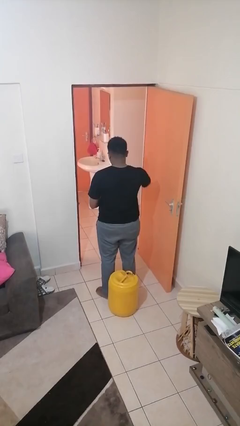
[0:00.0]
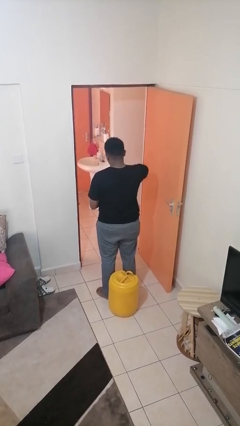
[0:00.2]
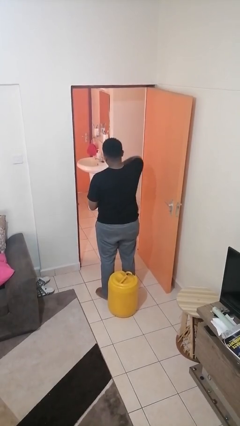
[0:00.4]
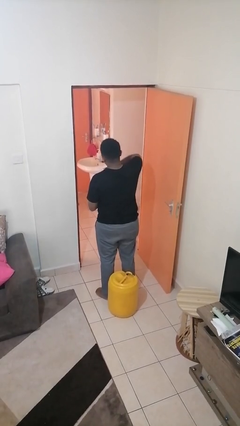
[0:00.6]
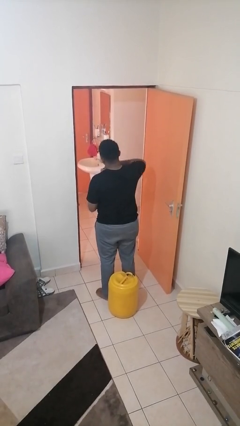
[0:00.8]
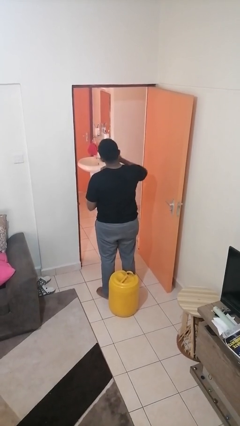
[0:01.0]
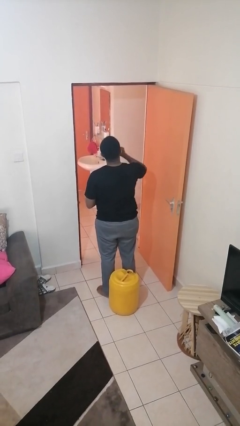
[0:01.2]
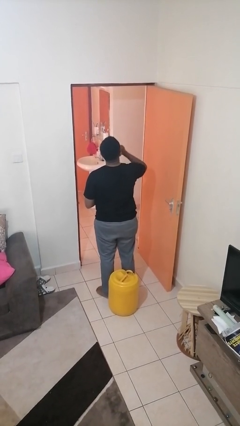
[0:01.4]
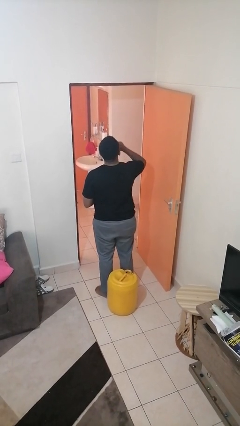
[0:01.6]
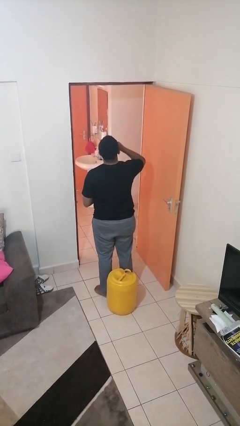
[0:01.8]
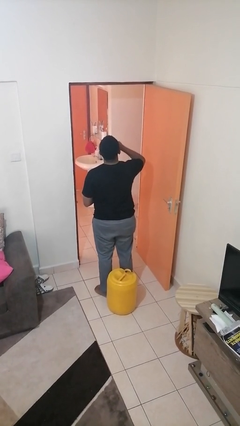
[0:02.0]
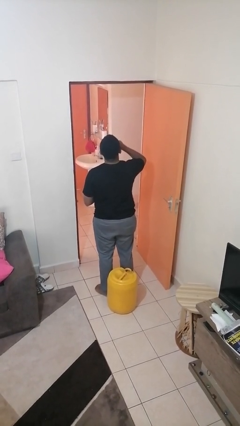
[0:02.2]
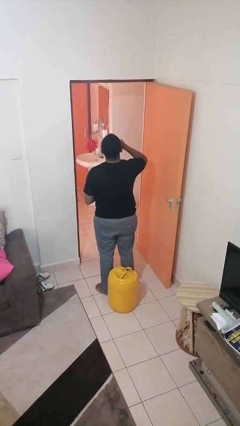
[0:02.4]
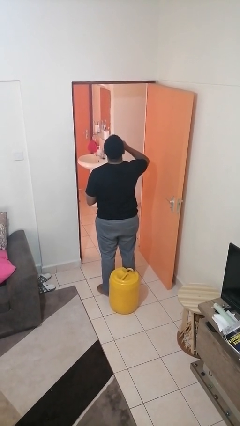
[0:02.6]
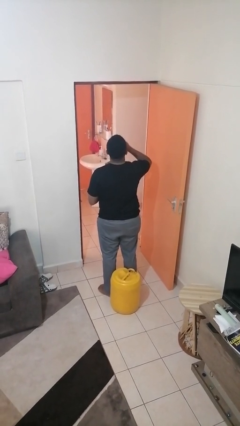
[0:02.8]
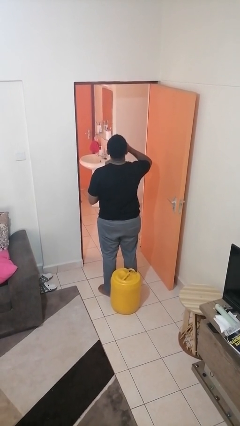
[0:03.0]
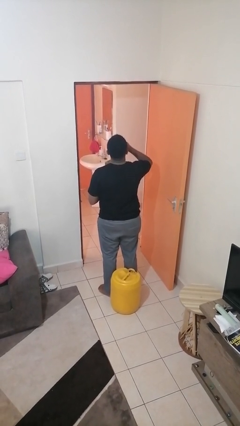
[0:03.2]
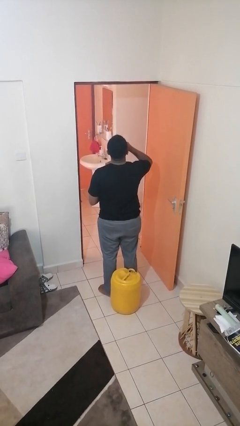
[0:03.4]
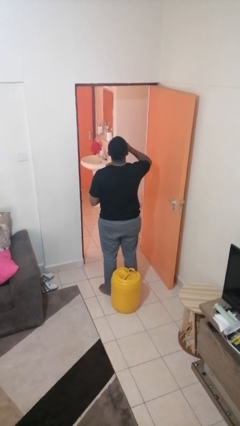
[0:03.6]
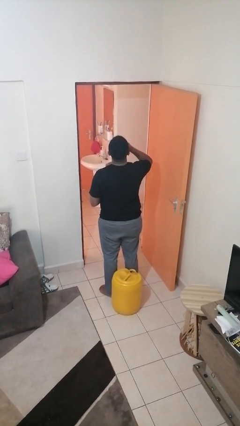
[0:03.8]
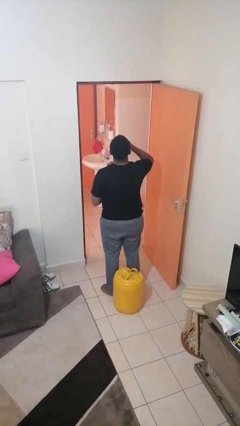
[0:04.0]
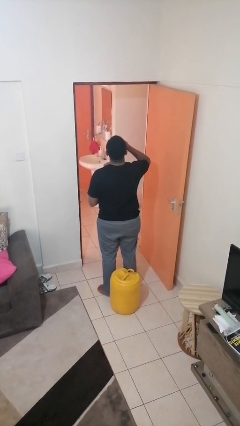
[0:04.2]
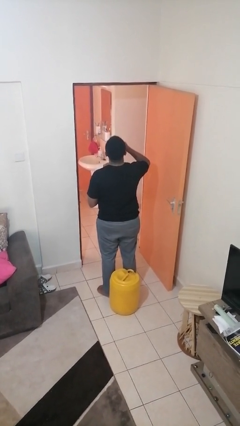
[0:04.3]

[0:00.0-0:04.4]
person eats snack from bag

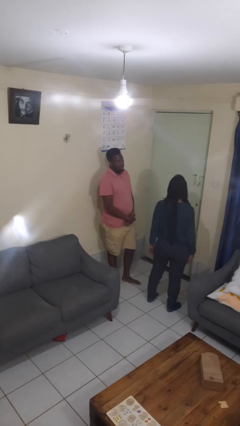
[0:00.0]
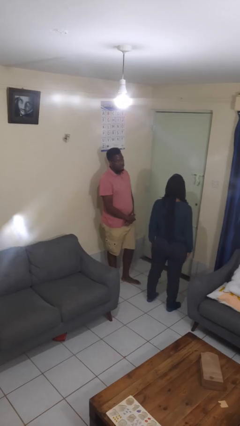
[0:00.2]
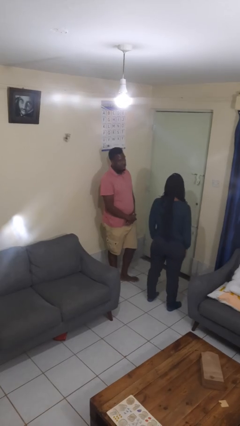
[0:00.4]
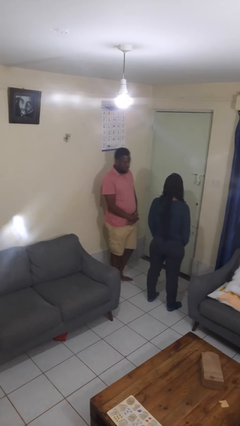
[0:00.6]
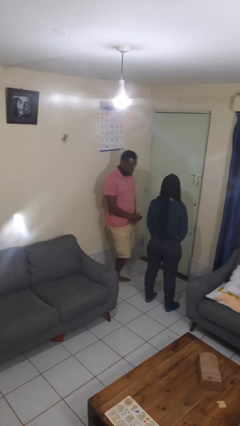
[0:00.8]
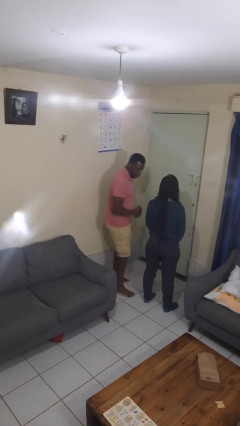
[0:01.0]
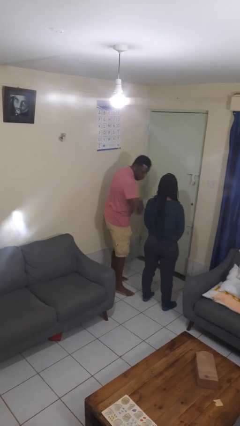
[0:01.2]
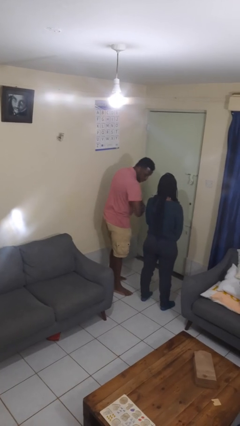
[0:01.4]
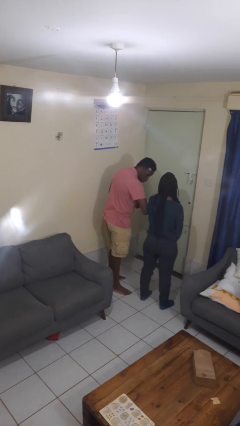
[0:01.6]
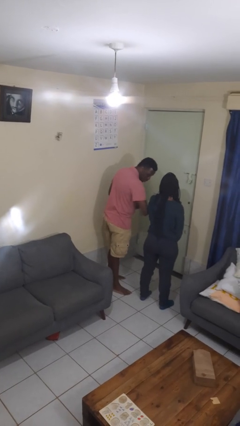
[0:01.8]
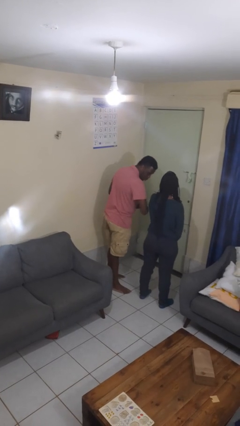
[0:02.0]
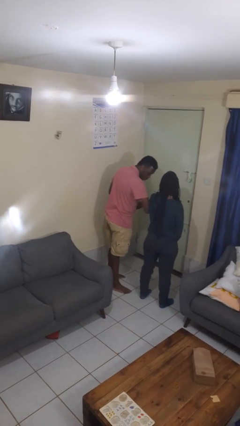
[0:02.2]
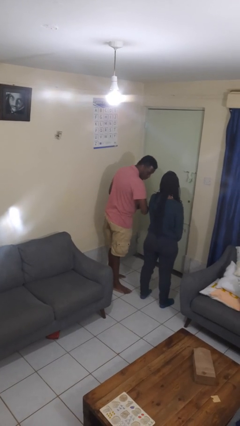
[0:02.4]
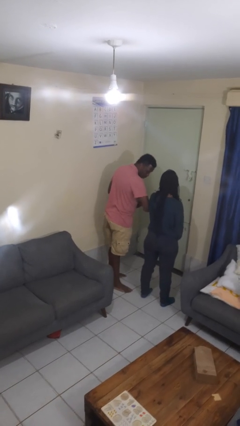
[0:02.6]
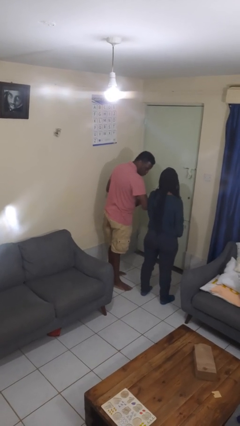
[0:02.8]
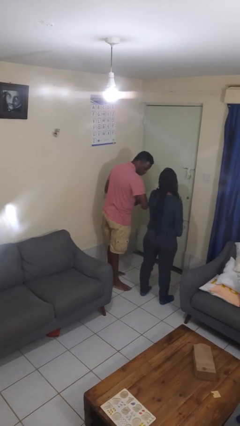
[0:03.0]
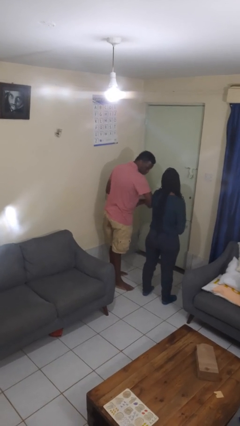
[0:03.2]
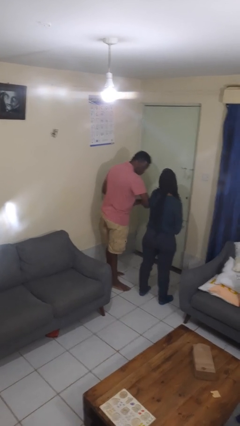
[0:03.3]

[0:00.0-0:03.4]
person nudges person with elbow

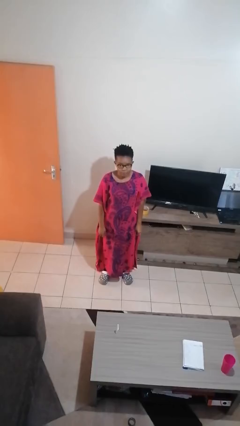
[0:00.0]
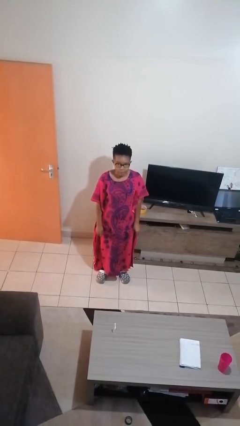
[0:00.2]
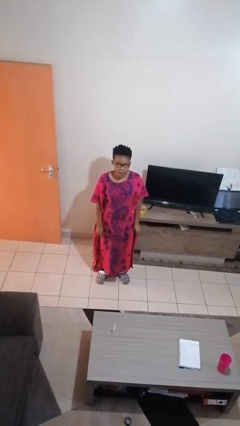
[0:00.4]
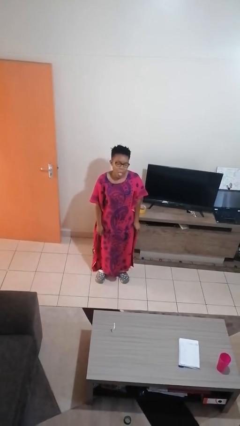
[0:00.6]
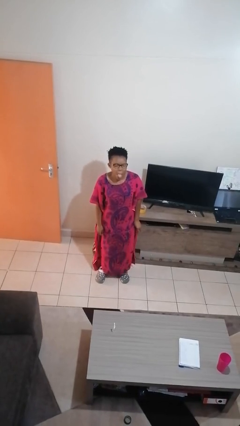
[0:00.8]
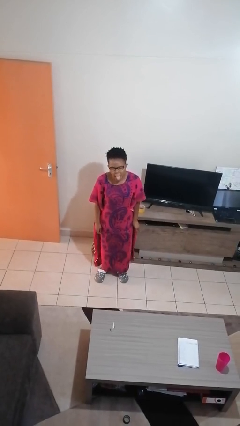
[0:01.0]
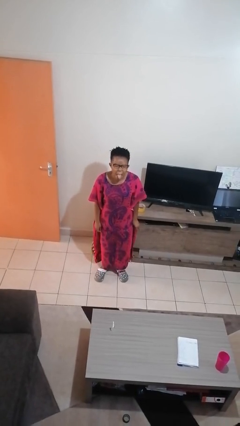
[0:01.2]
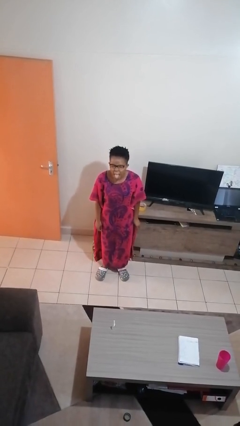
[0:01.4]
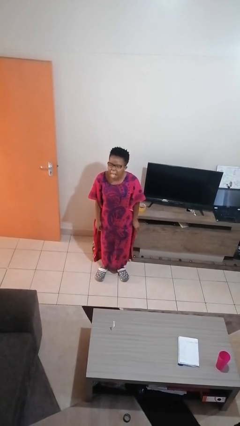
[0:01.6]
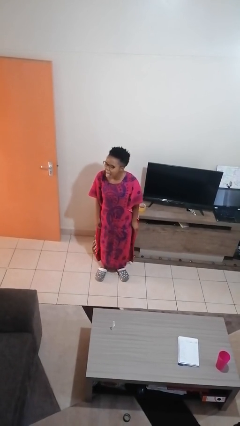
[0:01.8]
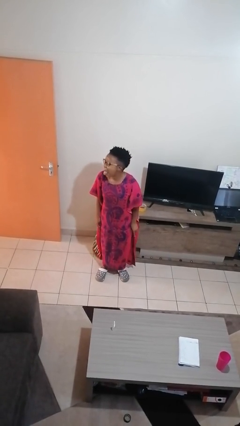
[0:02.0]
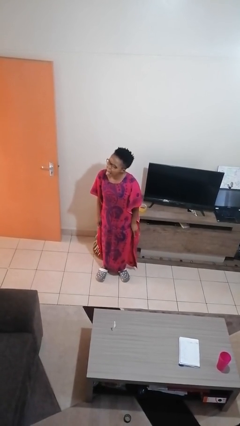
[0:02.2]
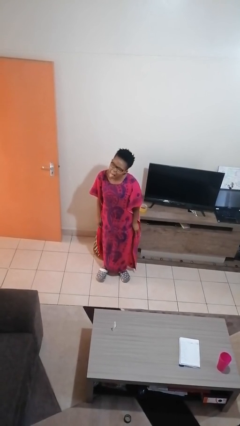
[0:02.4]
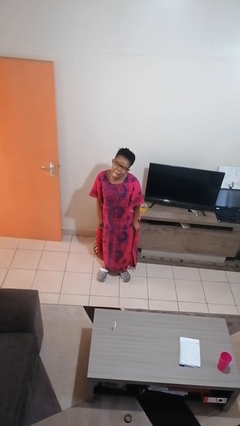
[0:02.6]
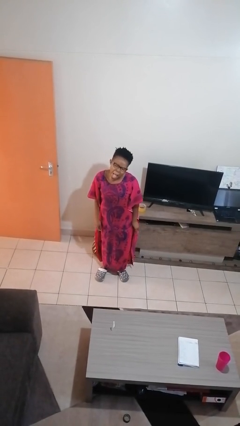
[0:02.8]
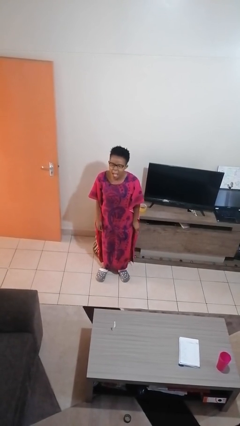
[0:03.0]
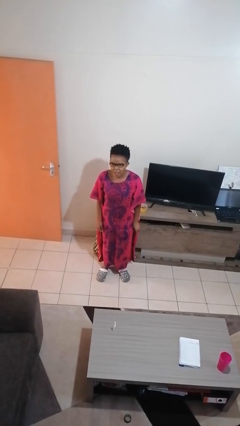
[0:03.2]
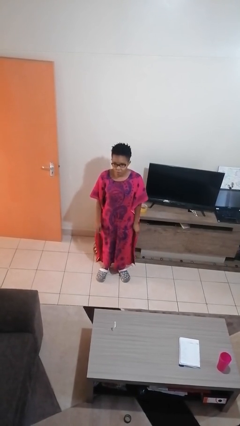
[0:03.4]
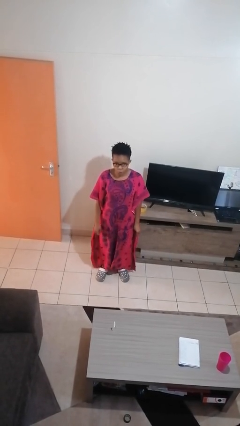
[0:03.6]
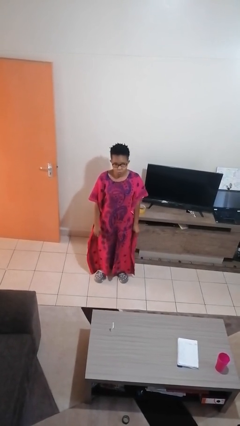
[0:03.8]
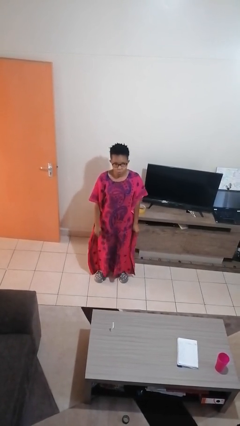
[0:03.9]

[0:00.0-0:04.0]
person sticks out tongue

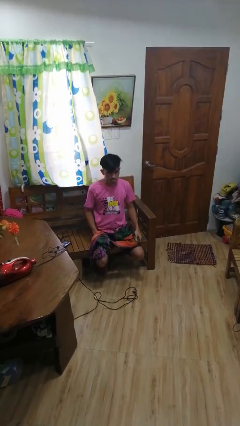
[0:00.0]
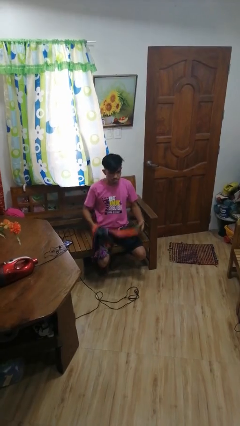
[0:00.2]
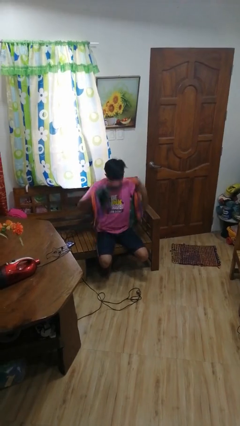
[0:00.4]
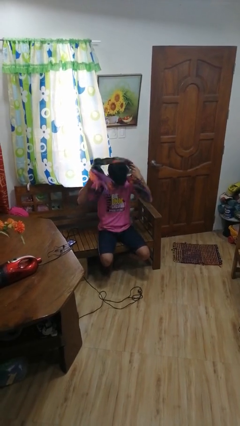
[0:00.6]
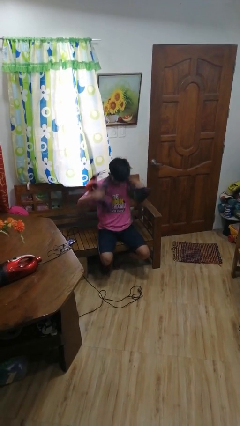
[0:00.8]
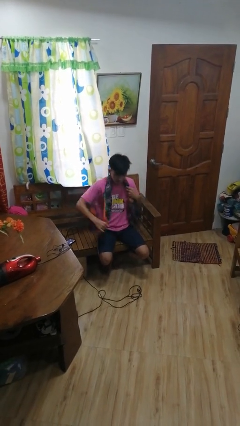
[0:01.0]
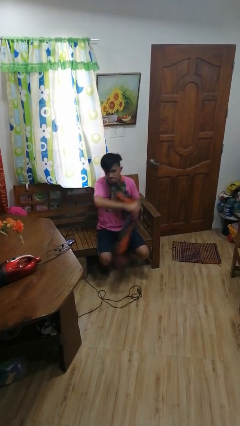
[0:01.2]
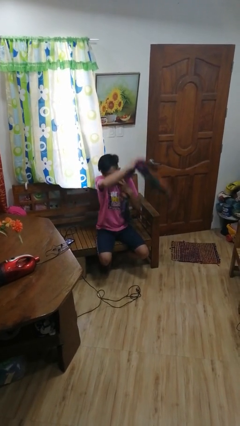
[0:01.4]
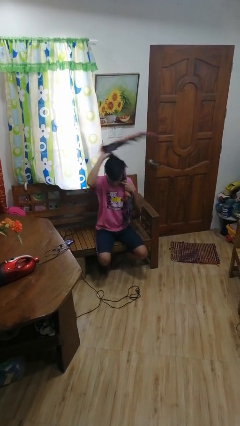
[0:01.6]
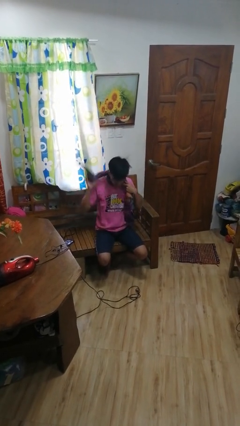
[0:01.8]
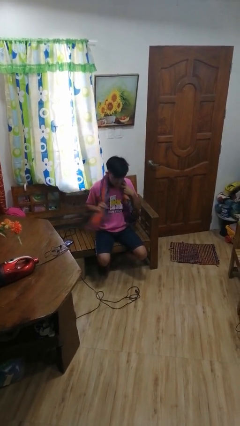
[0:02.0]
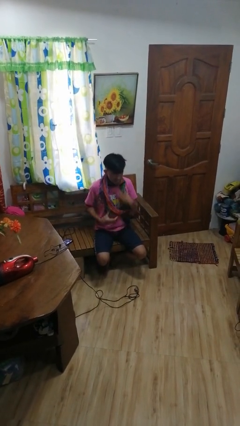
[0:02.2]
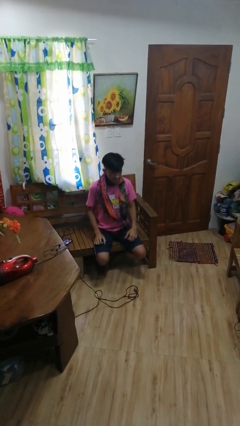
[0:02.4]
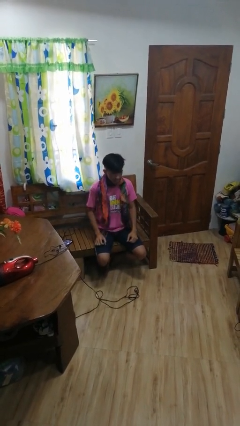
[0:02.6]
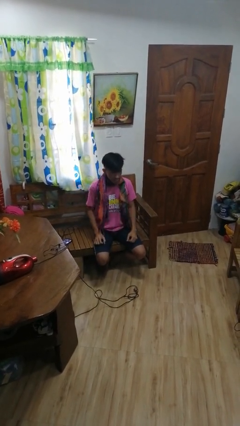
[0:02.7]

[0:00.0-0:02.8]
person puts on scarf

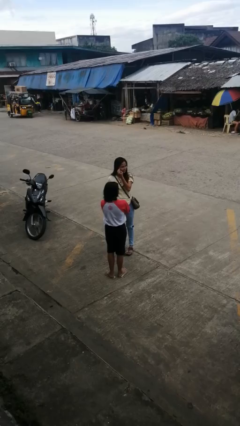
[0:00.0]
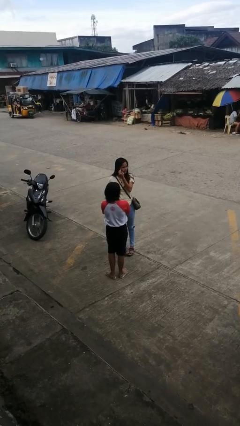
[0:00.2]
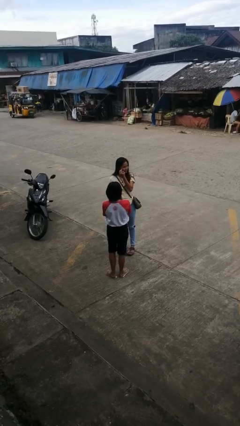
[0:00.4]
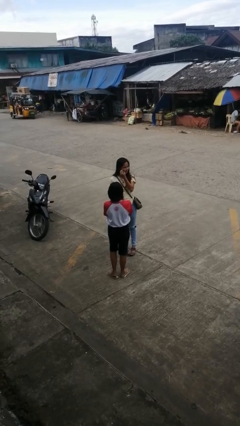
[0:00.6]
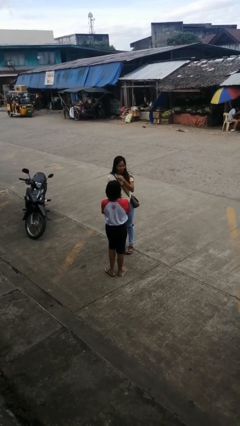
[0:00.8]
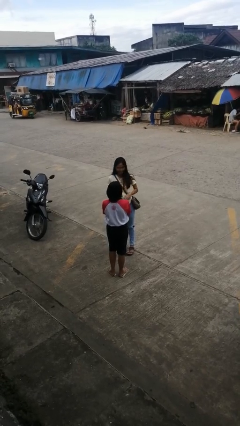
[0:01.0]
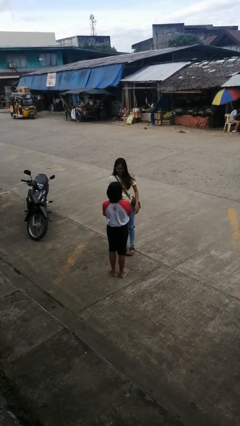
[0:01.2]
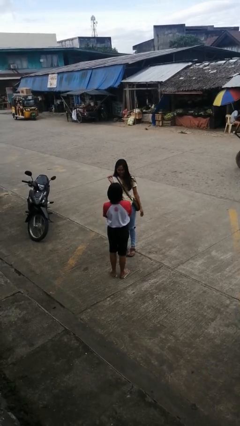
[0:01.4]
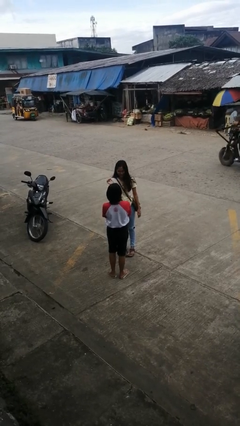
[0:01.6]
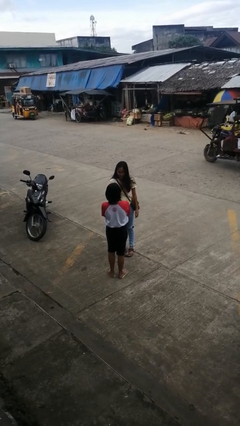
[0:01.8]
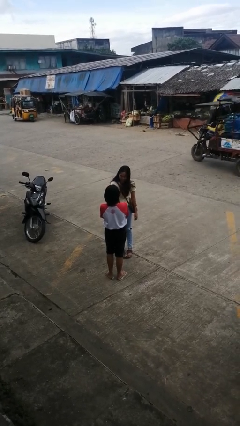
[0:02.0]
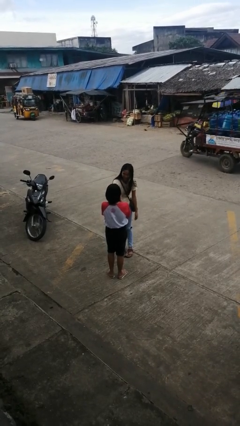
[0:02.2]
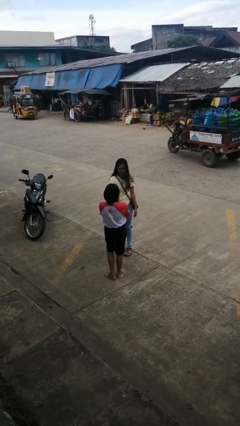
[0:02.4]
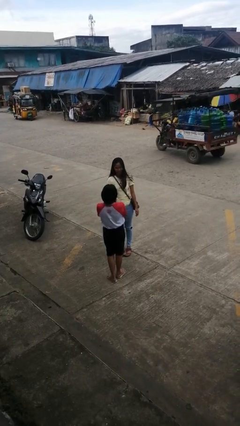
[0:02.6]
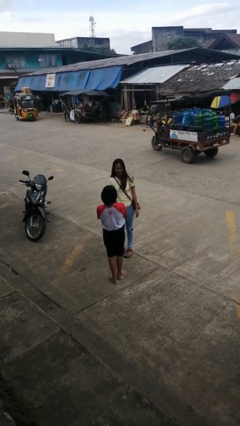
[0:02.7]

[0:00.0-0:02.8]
person laughs with person

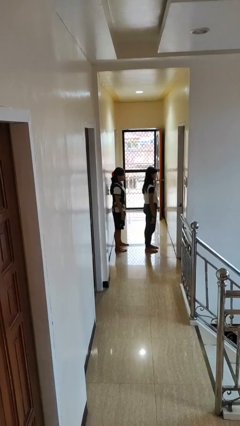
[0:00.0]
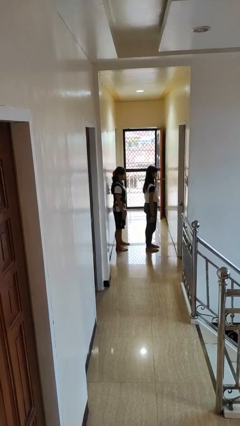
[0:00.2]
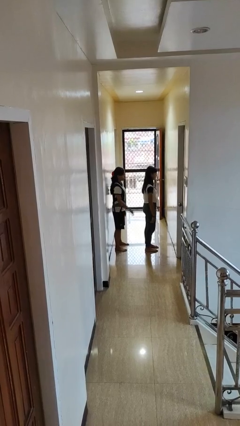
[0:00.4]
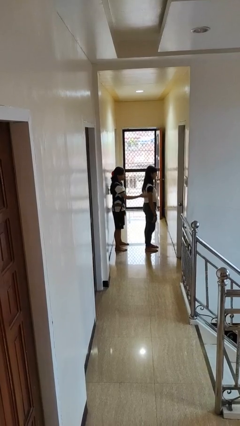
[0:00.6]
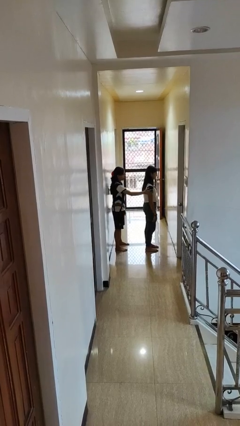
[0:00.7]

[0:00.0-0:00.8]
person grabs person by shoulder
